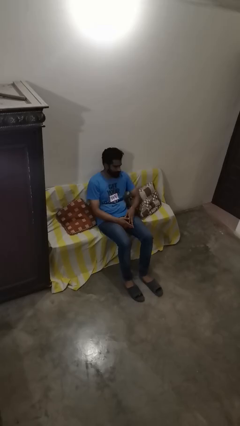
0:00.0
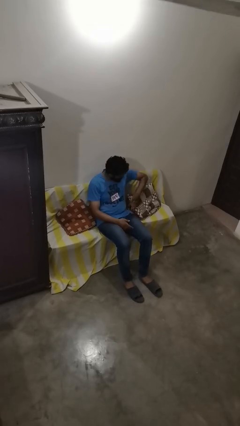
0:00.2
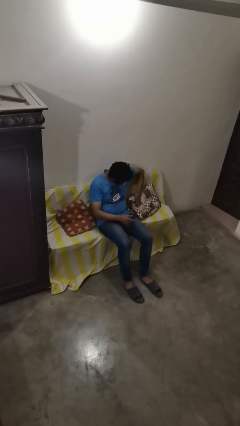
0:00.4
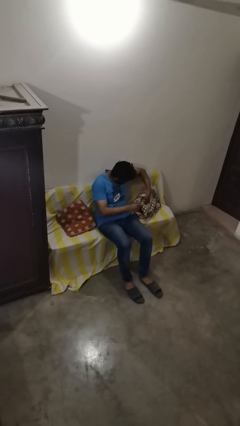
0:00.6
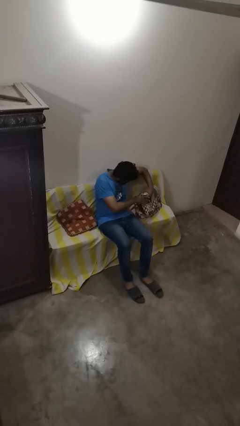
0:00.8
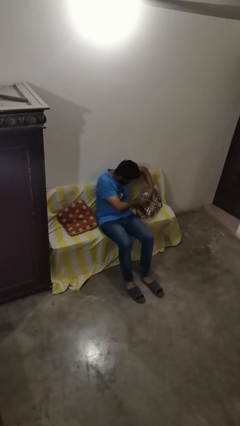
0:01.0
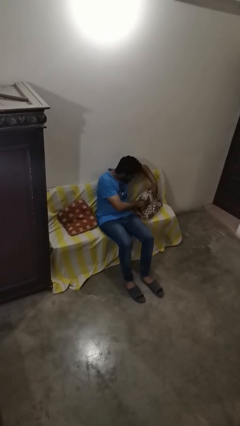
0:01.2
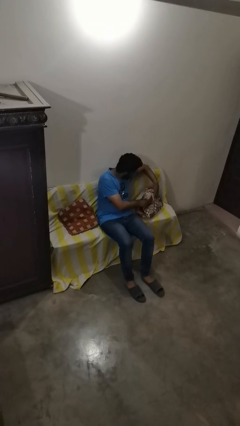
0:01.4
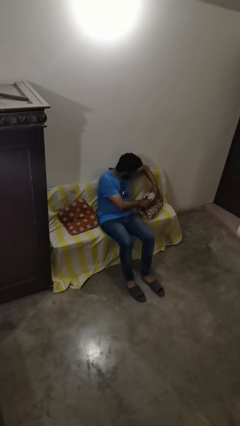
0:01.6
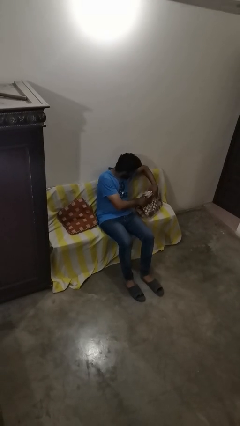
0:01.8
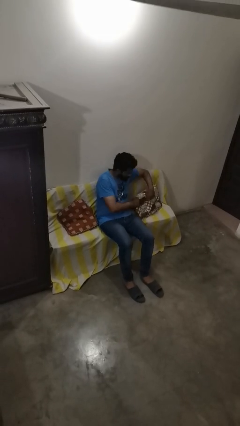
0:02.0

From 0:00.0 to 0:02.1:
person searches in couch

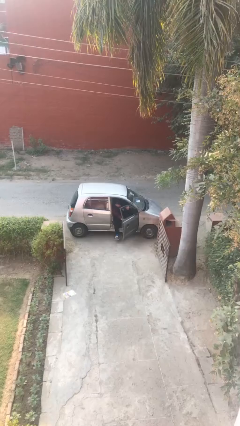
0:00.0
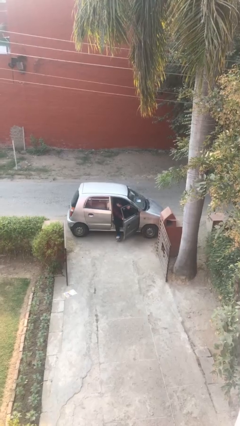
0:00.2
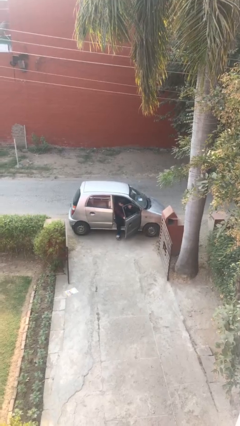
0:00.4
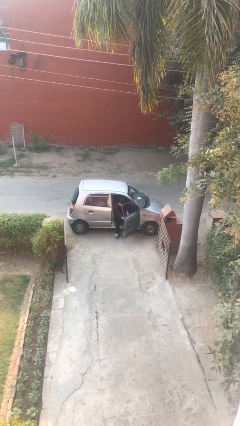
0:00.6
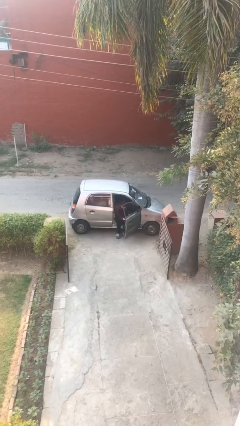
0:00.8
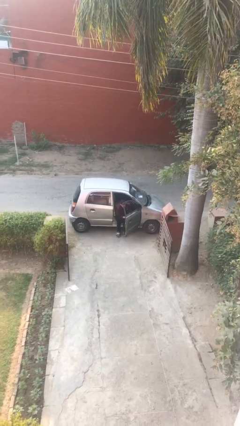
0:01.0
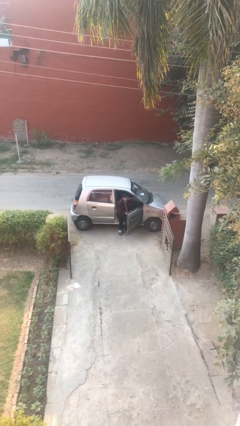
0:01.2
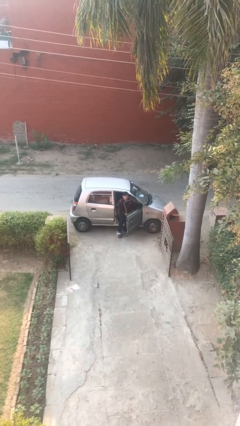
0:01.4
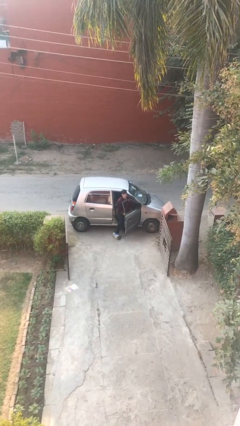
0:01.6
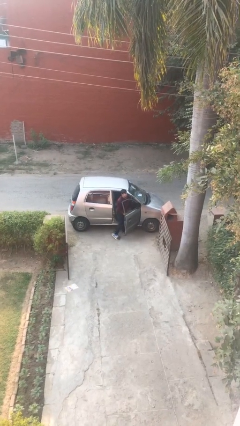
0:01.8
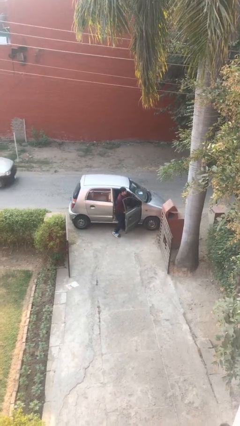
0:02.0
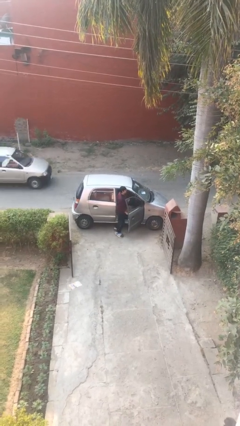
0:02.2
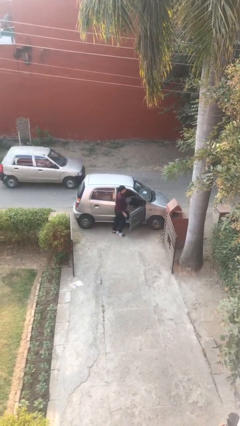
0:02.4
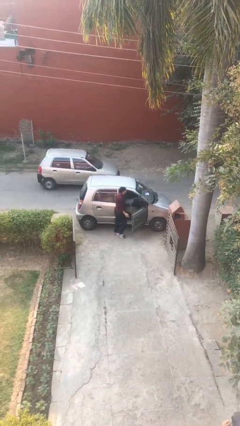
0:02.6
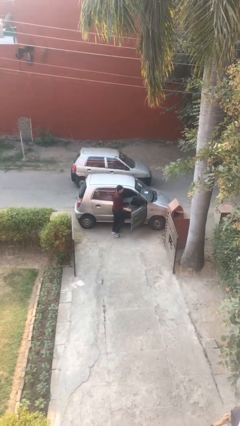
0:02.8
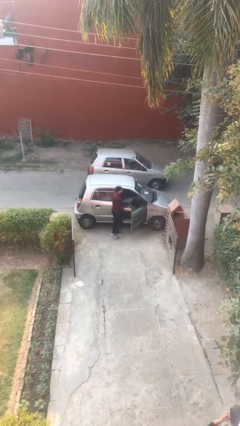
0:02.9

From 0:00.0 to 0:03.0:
person exits car

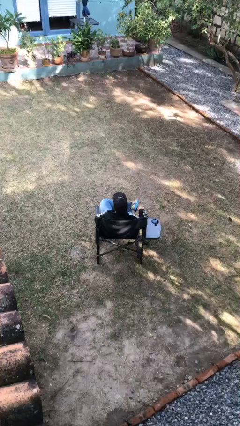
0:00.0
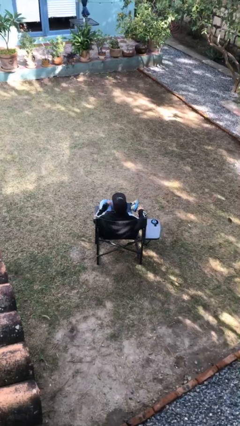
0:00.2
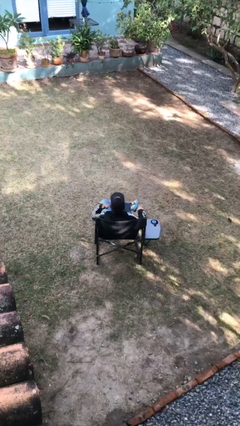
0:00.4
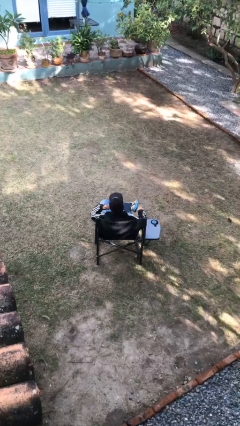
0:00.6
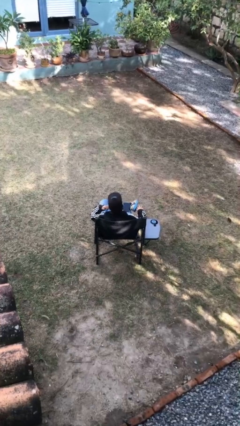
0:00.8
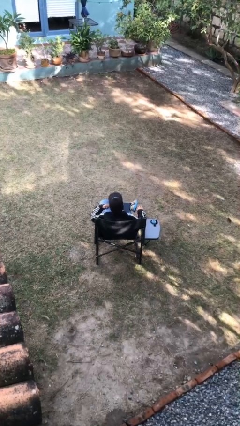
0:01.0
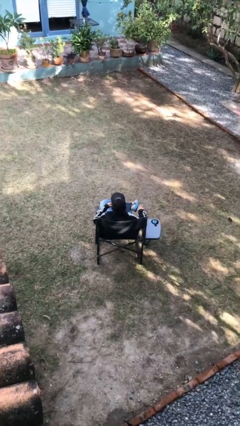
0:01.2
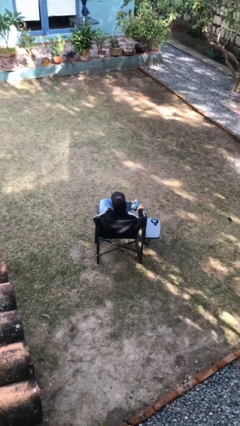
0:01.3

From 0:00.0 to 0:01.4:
person gestures call me

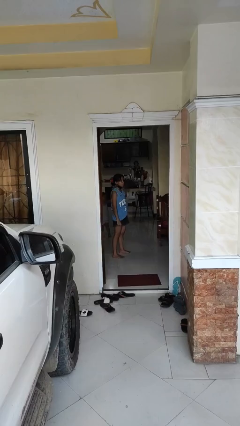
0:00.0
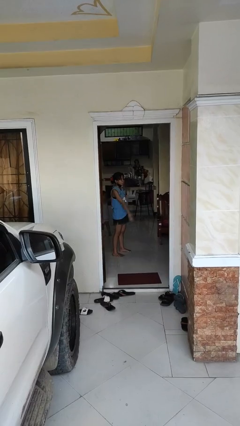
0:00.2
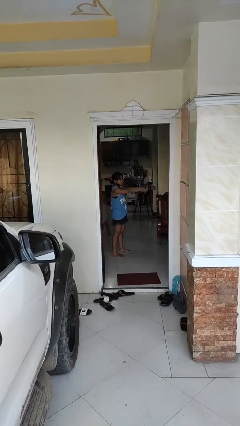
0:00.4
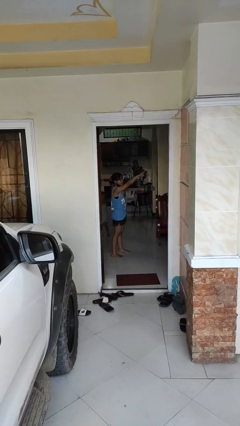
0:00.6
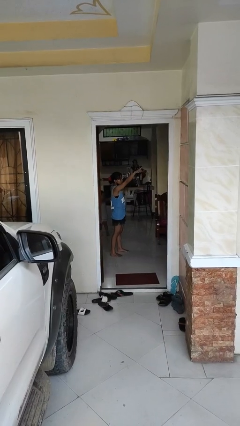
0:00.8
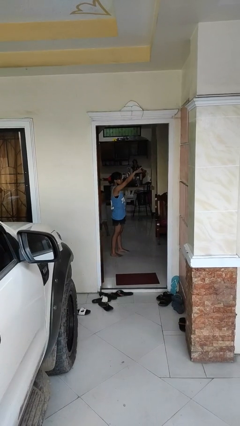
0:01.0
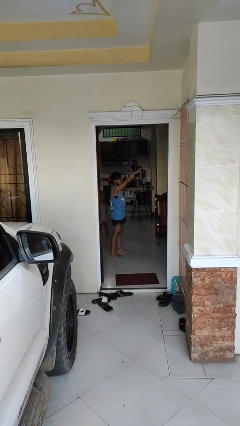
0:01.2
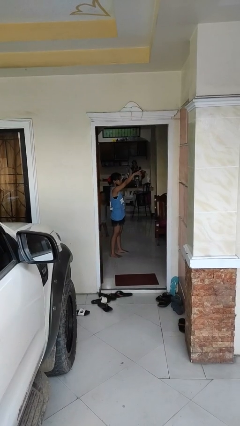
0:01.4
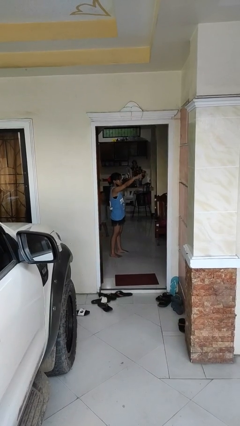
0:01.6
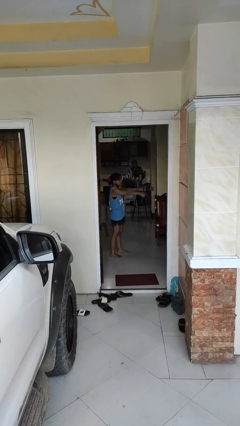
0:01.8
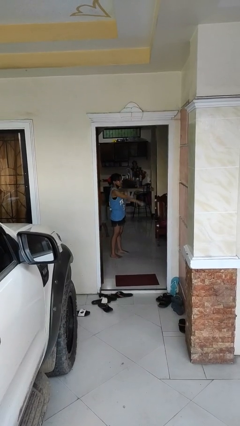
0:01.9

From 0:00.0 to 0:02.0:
person points at person

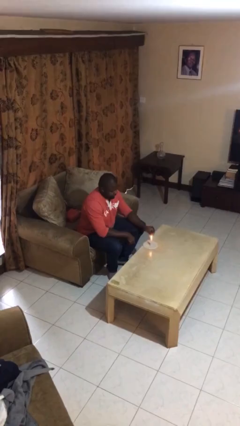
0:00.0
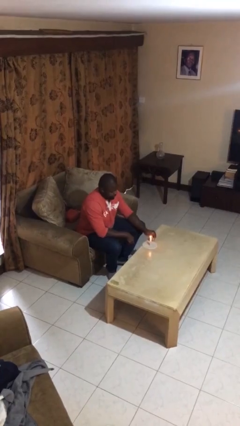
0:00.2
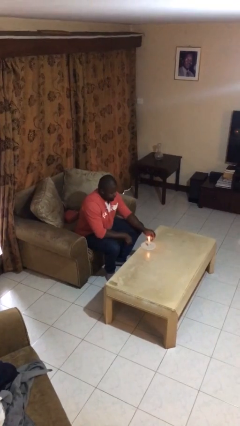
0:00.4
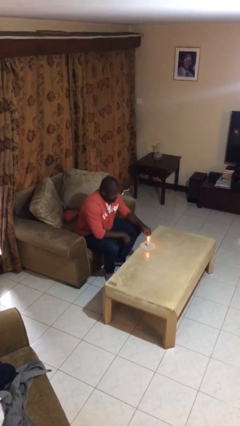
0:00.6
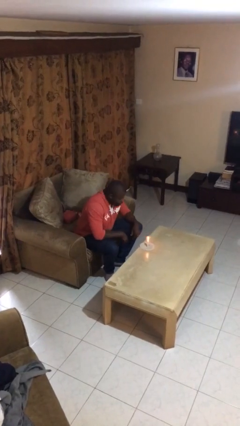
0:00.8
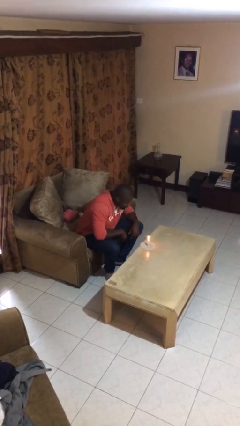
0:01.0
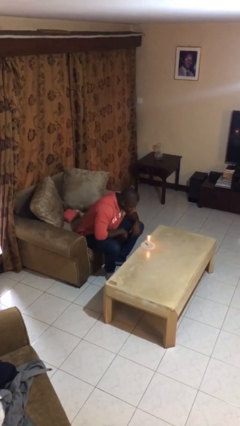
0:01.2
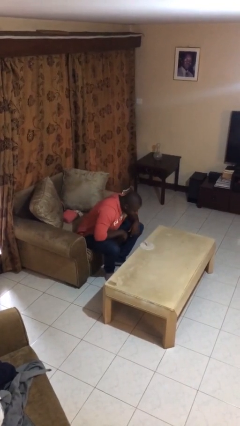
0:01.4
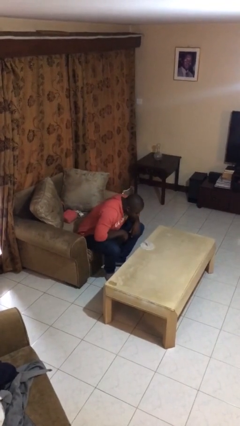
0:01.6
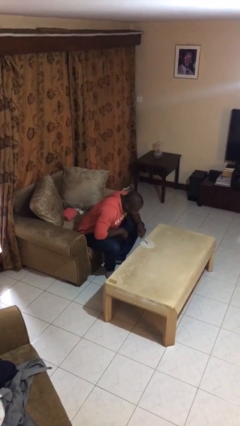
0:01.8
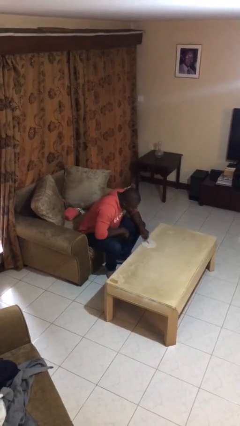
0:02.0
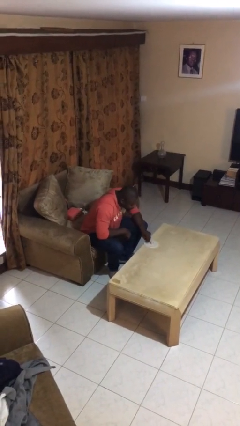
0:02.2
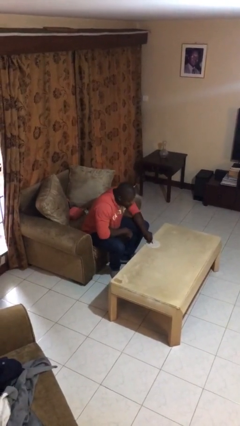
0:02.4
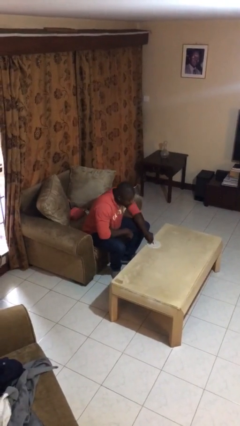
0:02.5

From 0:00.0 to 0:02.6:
person extinguishes candle

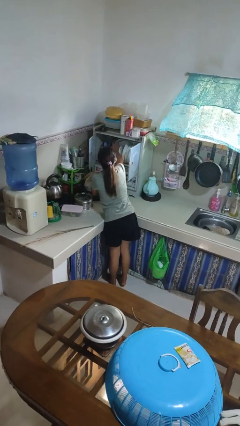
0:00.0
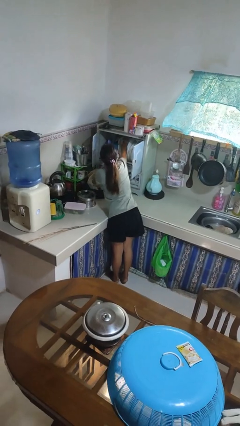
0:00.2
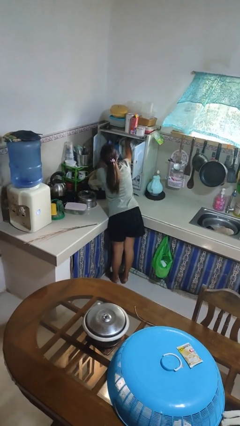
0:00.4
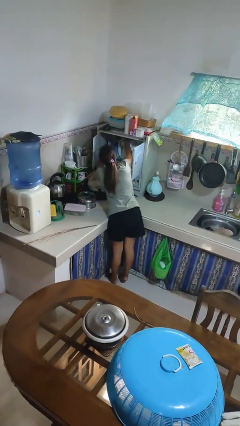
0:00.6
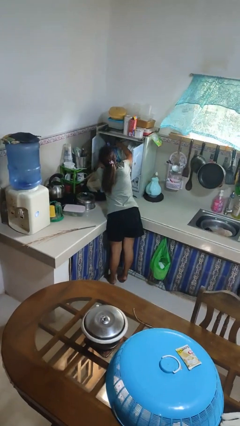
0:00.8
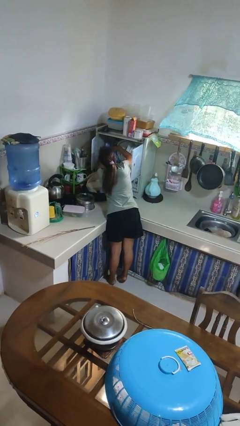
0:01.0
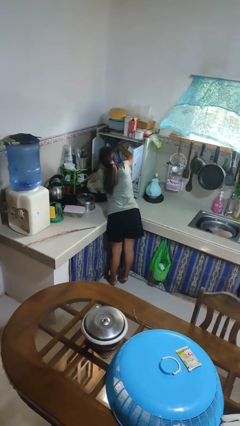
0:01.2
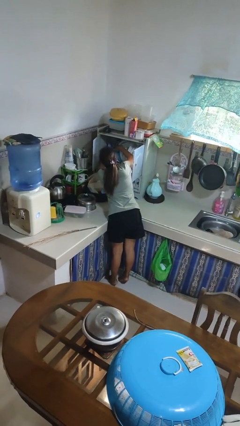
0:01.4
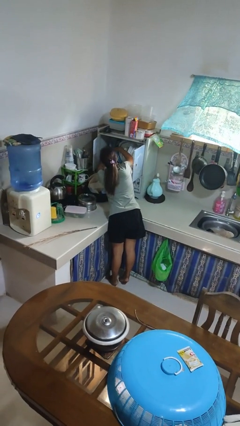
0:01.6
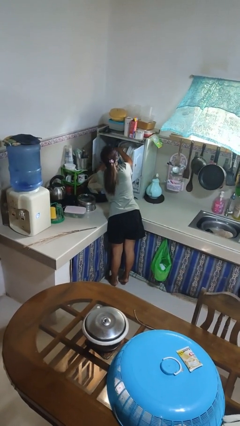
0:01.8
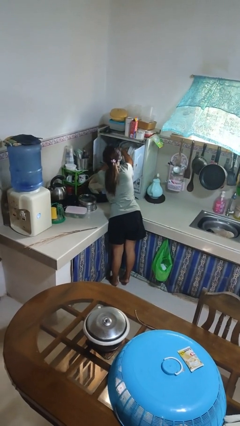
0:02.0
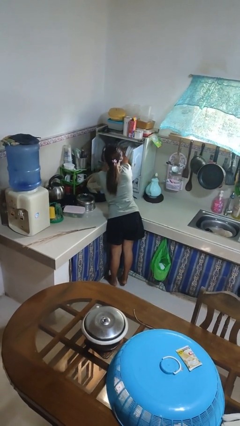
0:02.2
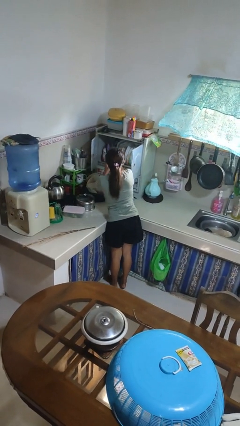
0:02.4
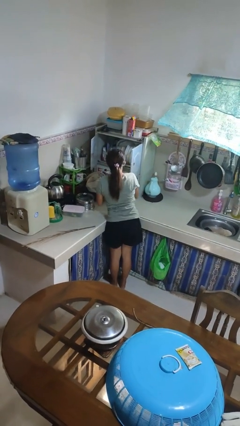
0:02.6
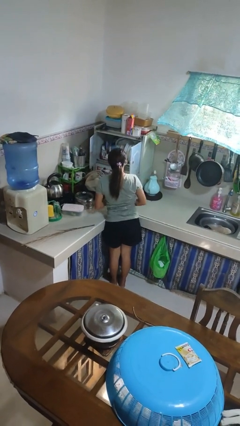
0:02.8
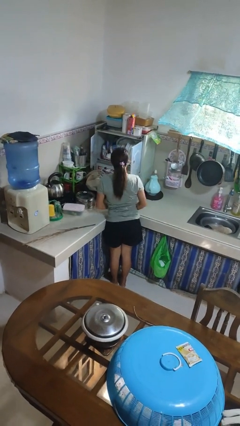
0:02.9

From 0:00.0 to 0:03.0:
person searches in kitchen drawer

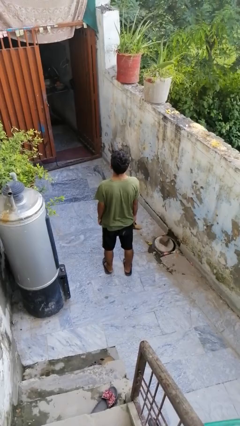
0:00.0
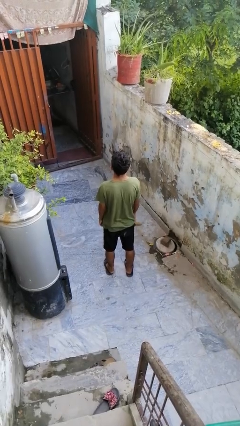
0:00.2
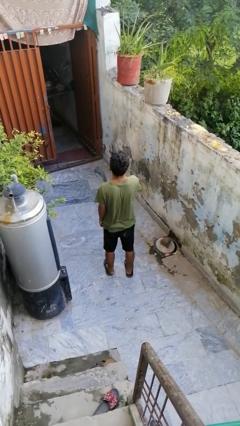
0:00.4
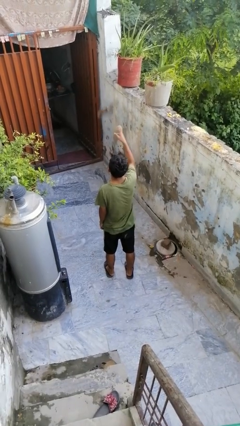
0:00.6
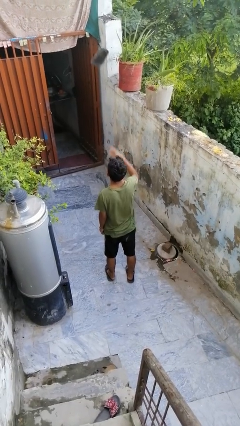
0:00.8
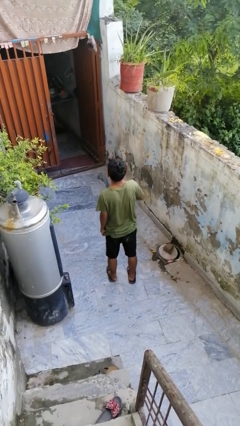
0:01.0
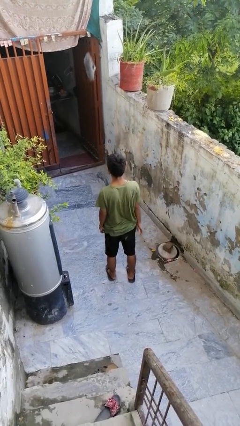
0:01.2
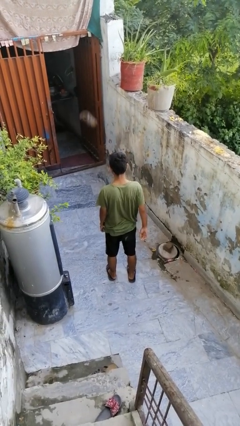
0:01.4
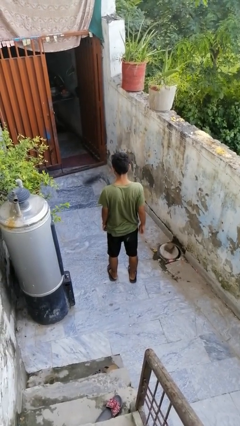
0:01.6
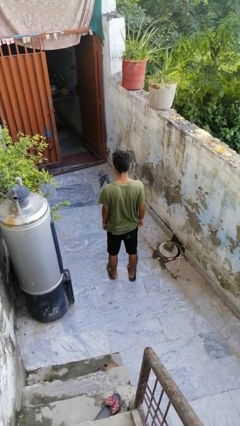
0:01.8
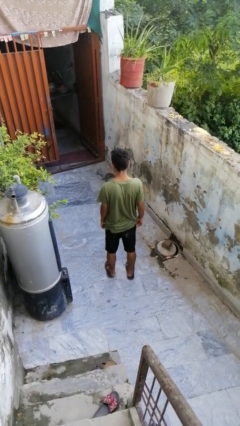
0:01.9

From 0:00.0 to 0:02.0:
person throws object into air

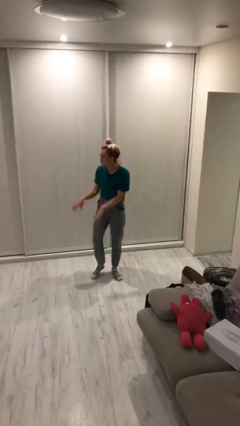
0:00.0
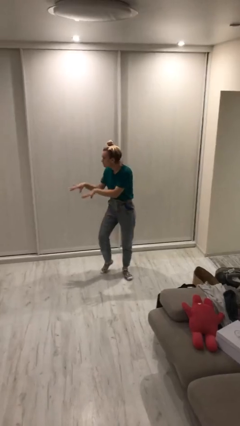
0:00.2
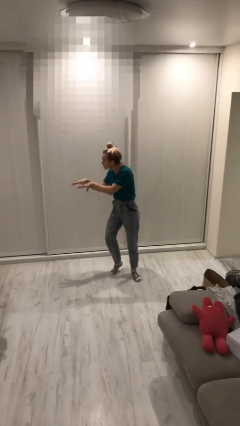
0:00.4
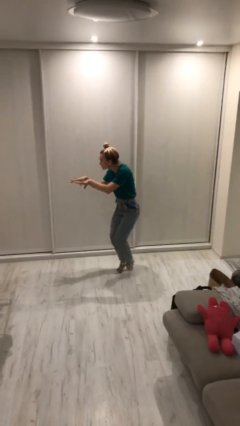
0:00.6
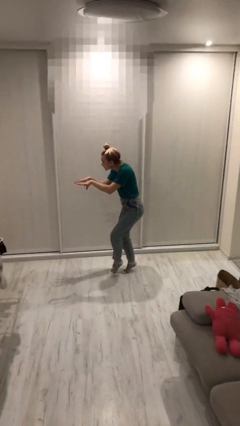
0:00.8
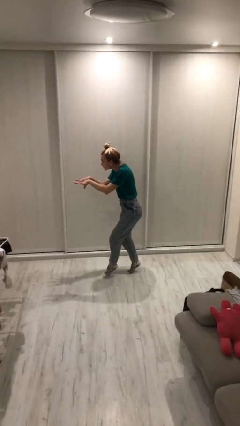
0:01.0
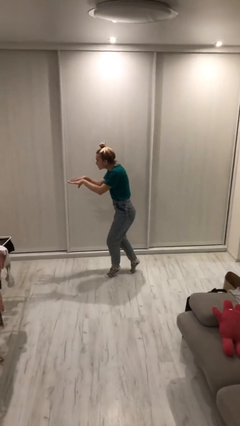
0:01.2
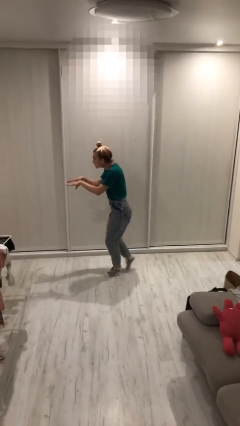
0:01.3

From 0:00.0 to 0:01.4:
person walks tiptoe
